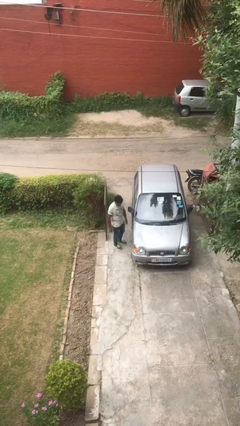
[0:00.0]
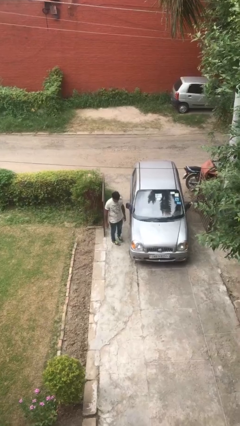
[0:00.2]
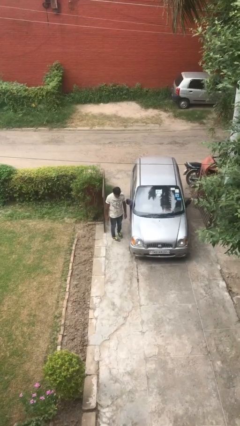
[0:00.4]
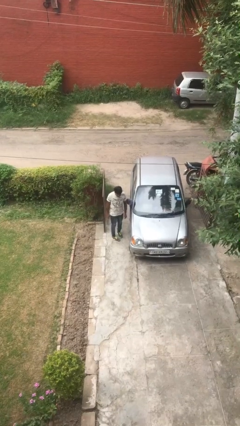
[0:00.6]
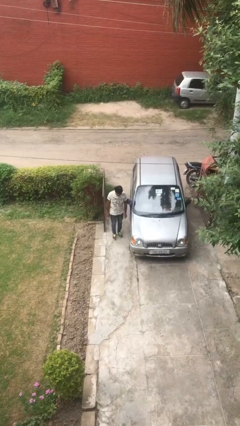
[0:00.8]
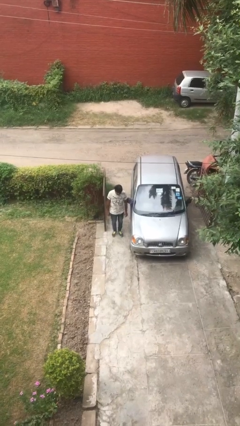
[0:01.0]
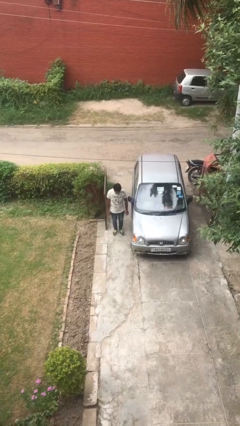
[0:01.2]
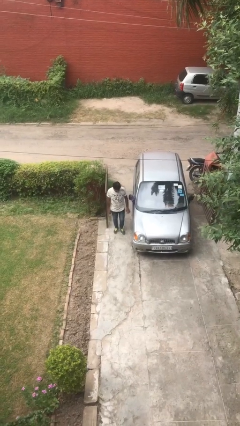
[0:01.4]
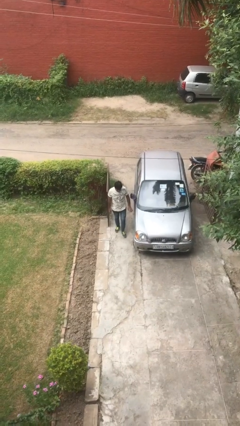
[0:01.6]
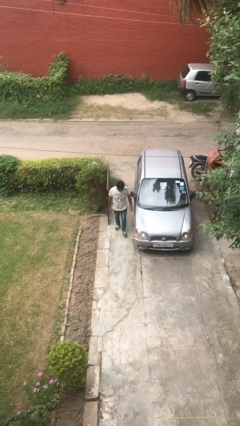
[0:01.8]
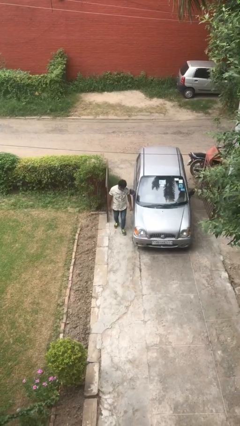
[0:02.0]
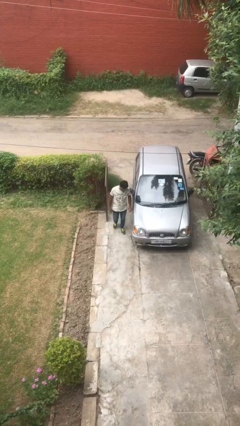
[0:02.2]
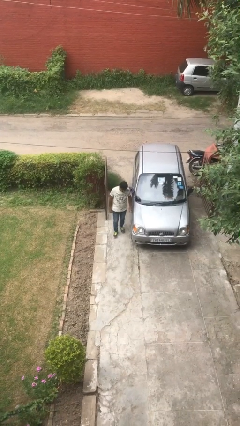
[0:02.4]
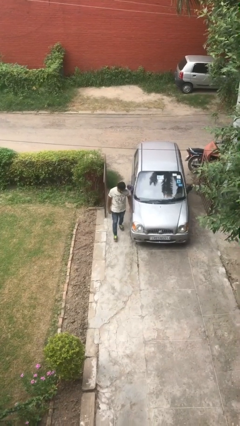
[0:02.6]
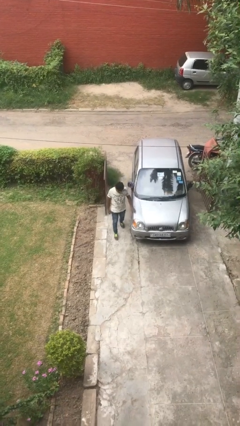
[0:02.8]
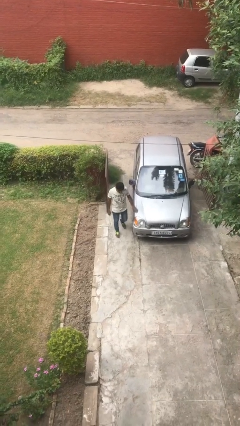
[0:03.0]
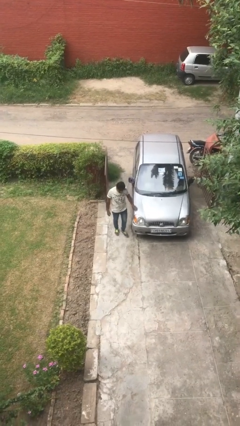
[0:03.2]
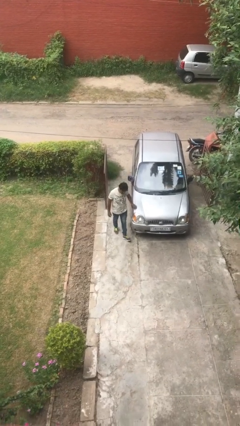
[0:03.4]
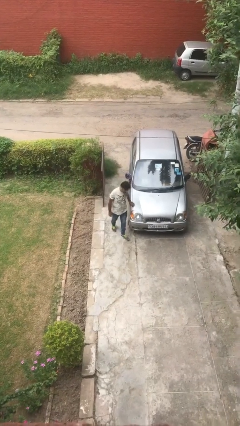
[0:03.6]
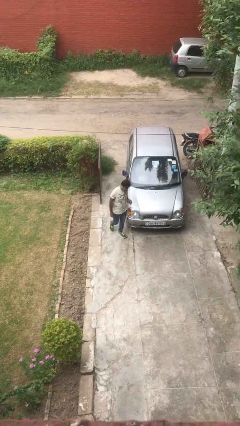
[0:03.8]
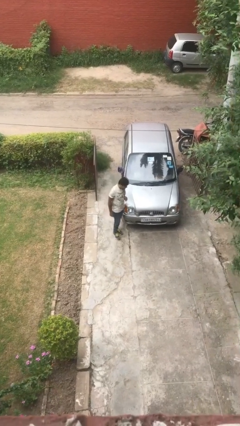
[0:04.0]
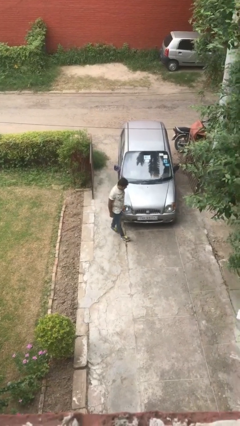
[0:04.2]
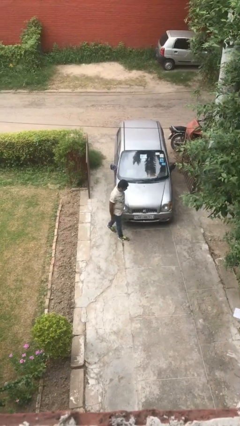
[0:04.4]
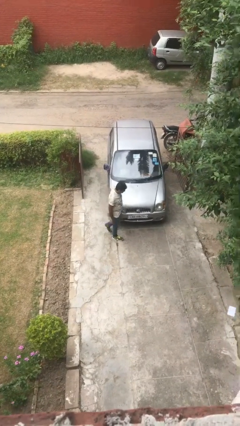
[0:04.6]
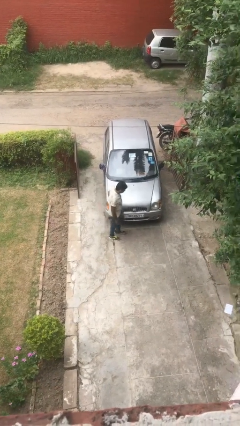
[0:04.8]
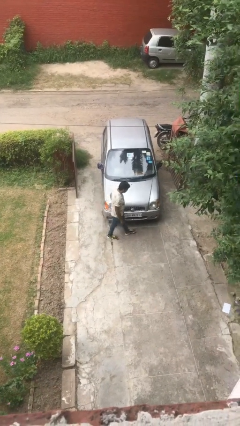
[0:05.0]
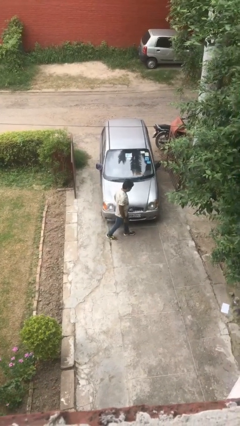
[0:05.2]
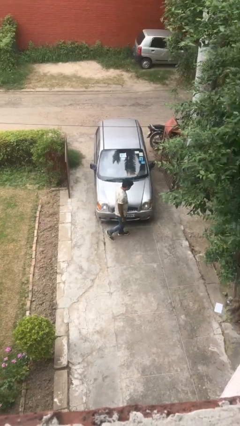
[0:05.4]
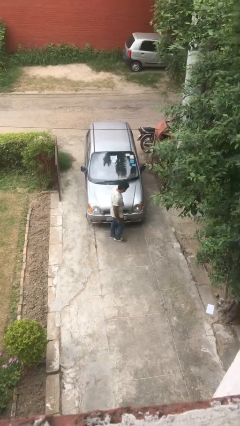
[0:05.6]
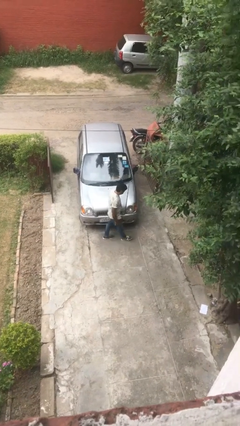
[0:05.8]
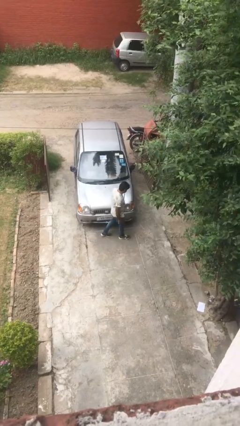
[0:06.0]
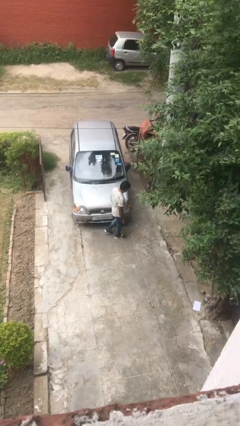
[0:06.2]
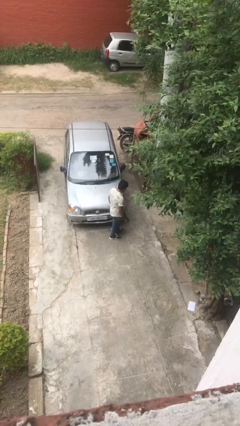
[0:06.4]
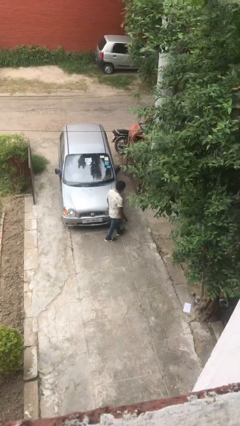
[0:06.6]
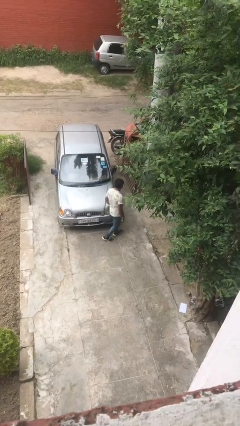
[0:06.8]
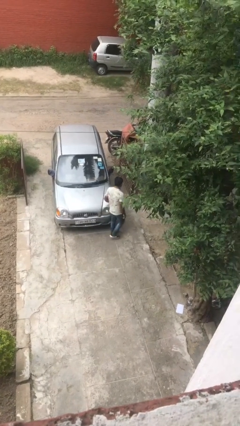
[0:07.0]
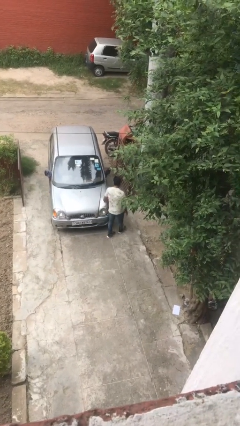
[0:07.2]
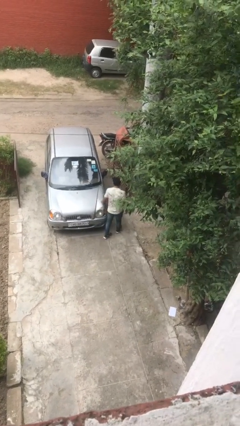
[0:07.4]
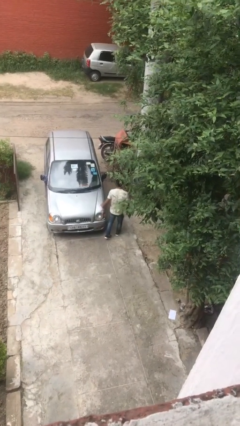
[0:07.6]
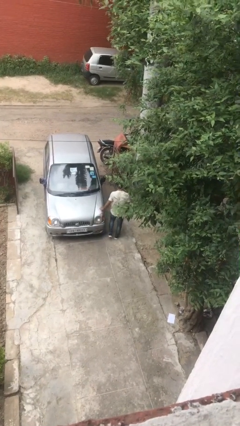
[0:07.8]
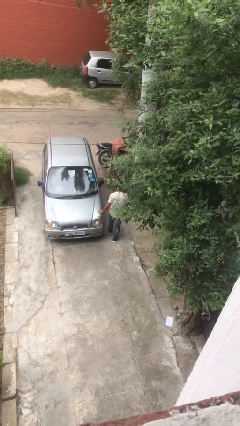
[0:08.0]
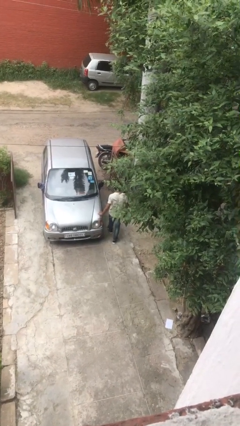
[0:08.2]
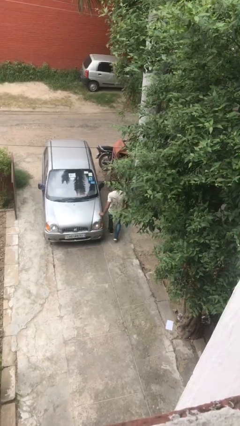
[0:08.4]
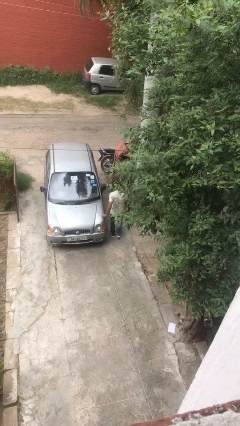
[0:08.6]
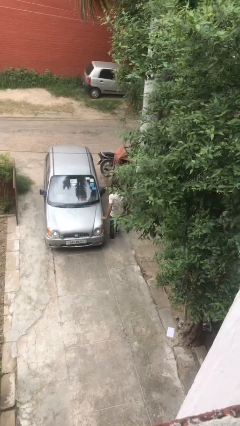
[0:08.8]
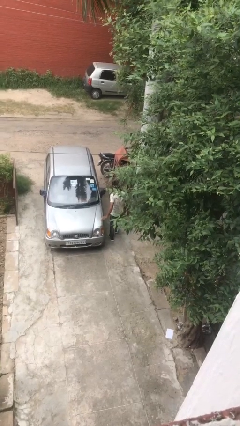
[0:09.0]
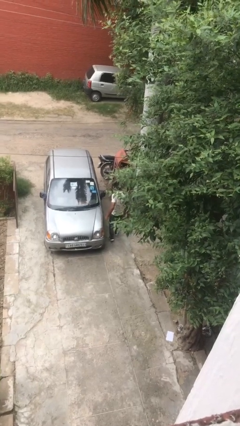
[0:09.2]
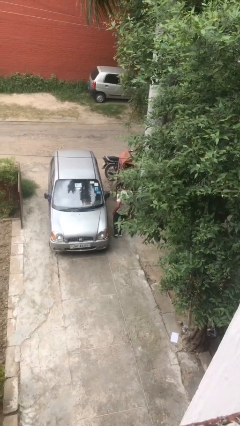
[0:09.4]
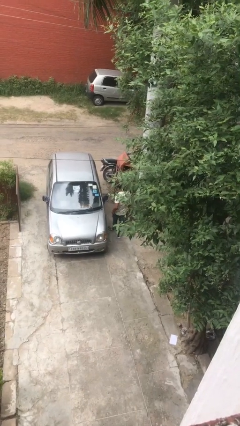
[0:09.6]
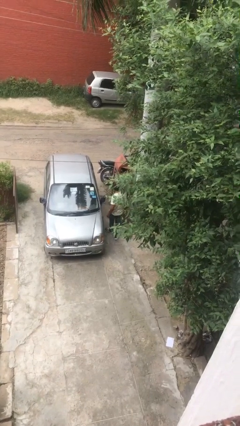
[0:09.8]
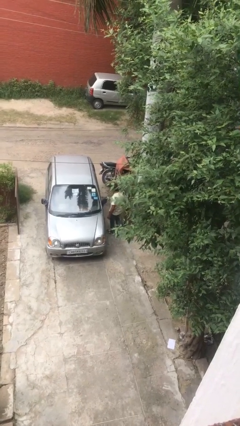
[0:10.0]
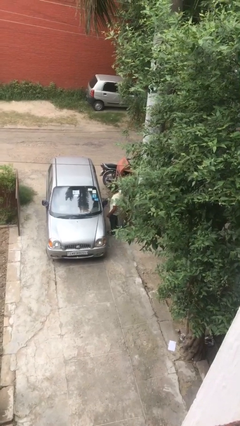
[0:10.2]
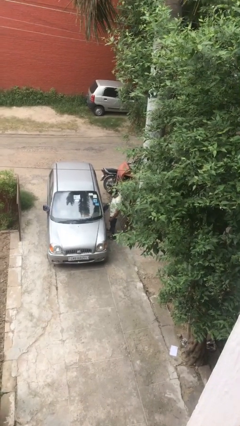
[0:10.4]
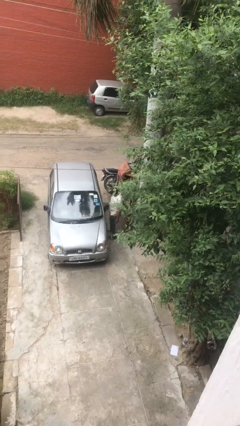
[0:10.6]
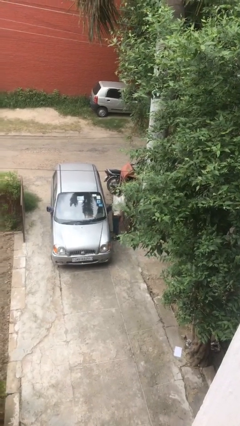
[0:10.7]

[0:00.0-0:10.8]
person walks around car

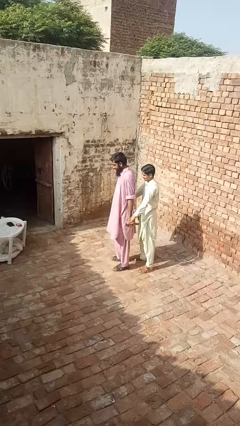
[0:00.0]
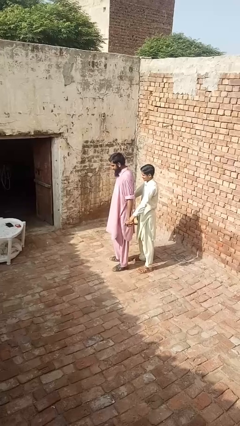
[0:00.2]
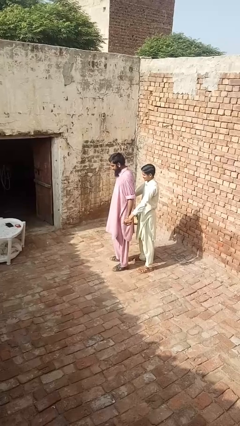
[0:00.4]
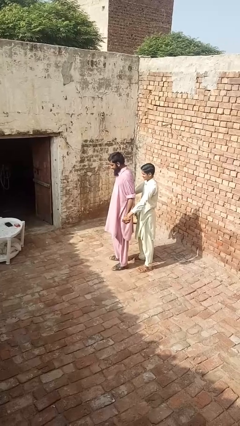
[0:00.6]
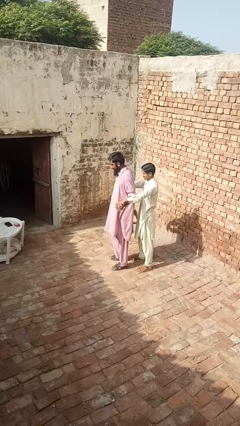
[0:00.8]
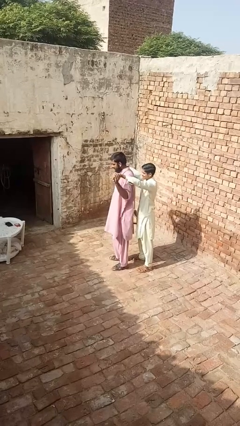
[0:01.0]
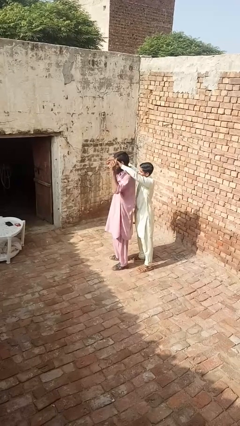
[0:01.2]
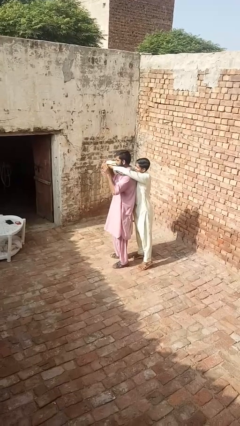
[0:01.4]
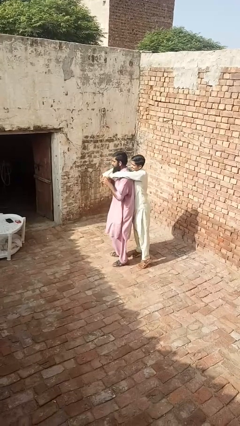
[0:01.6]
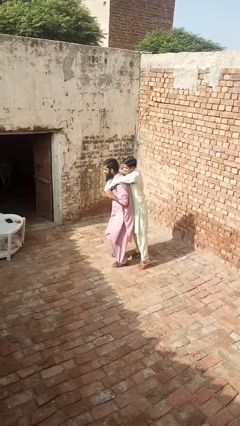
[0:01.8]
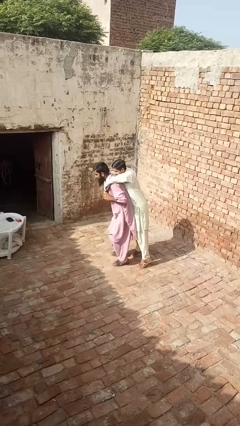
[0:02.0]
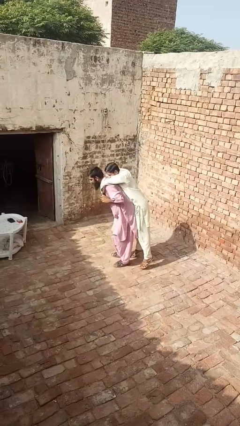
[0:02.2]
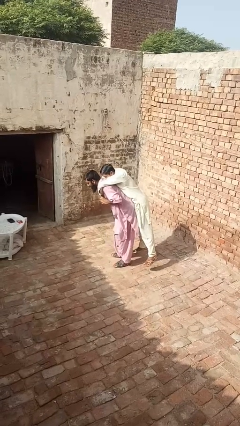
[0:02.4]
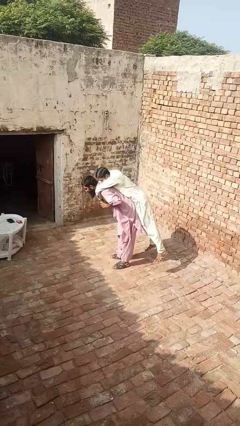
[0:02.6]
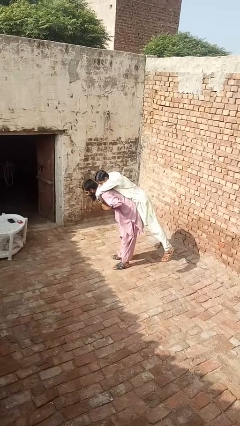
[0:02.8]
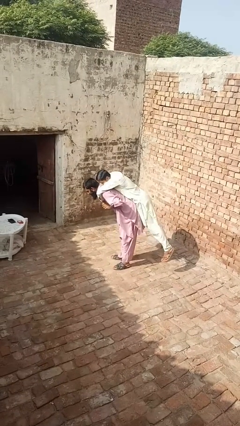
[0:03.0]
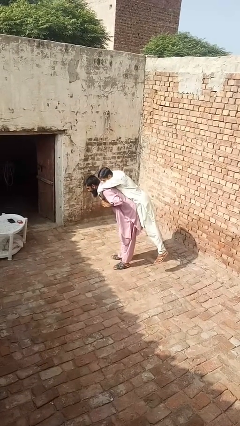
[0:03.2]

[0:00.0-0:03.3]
person picks up person

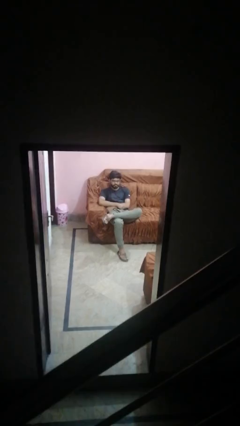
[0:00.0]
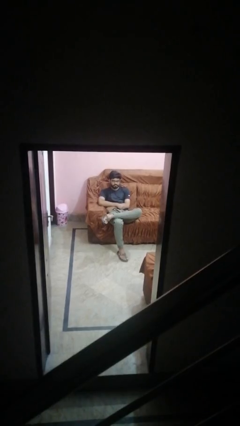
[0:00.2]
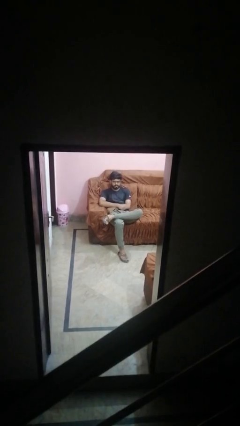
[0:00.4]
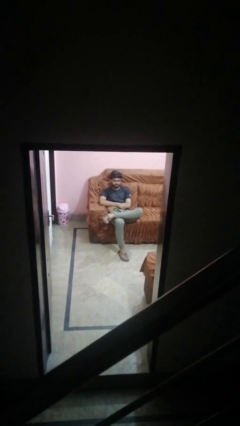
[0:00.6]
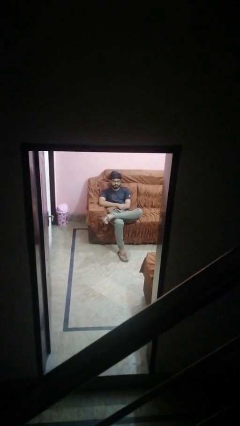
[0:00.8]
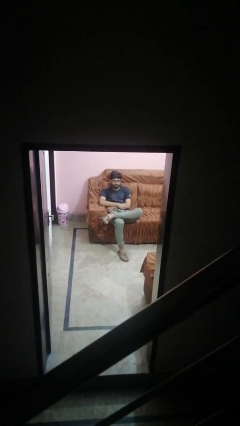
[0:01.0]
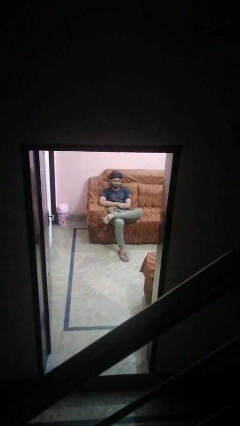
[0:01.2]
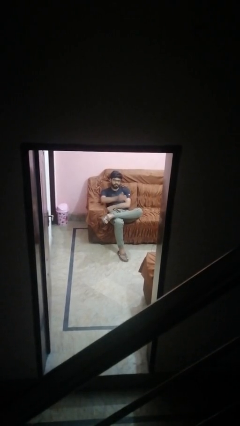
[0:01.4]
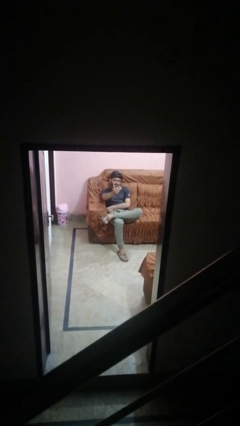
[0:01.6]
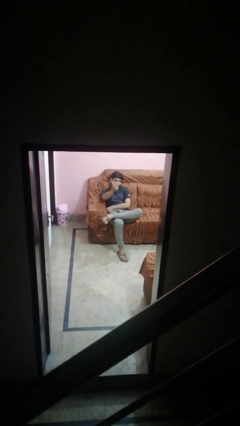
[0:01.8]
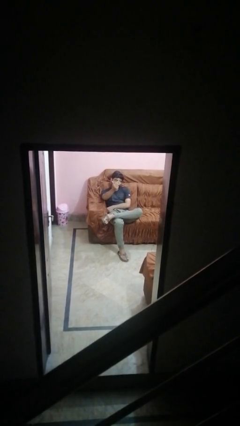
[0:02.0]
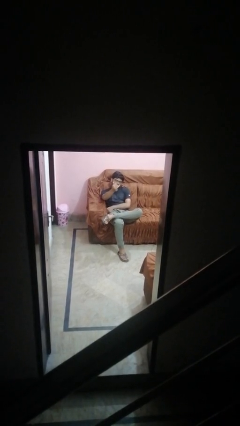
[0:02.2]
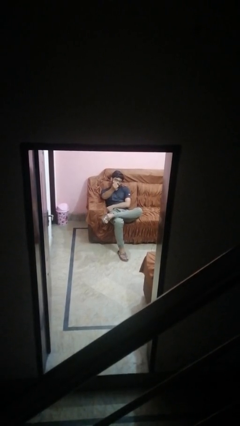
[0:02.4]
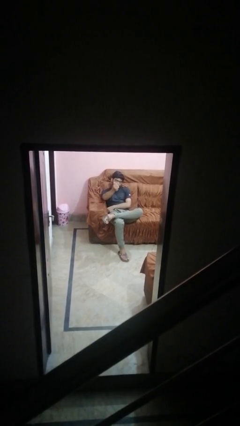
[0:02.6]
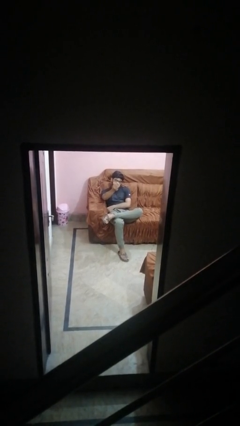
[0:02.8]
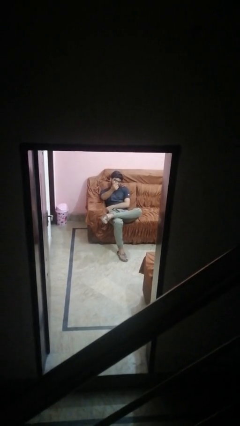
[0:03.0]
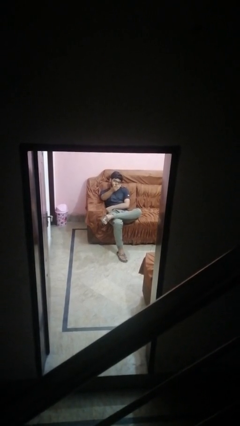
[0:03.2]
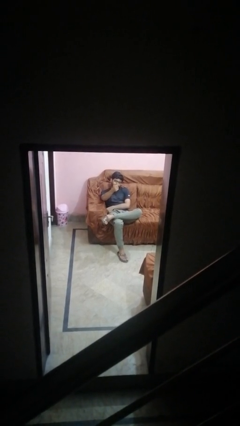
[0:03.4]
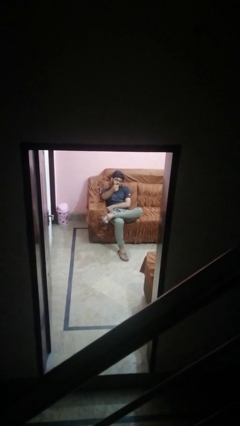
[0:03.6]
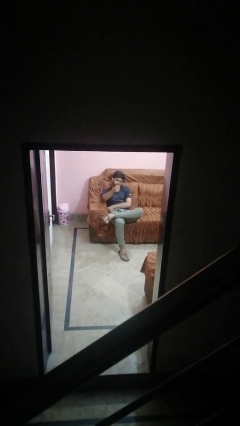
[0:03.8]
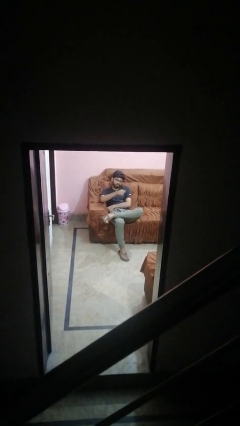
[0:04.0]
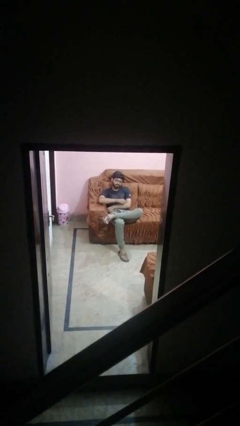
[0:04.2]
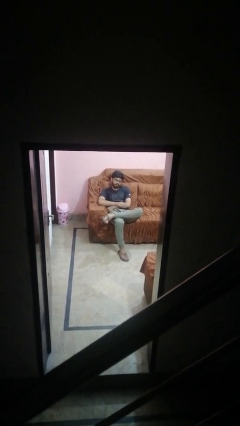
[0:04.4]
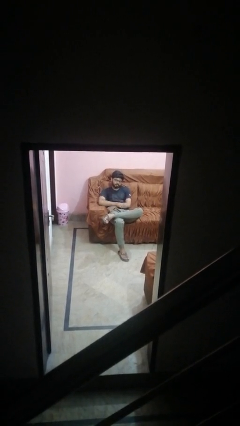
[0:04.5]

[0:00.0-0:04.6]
person gestures come here
